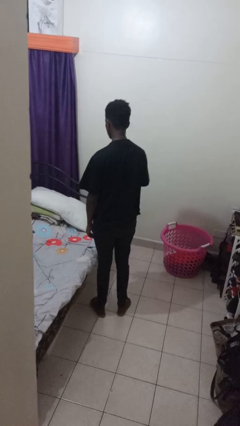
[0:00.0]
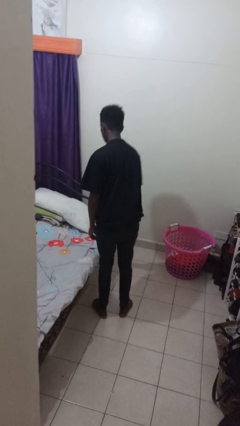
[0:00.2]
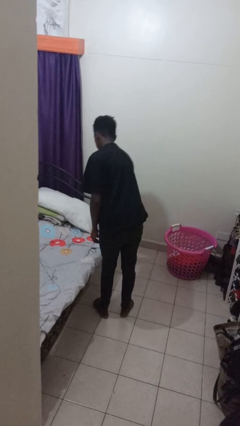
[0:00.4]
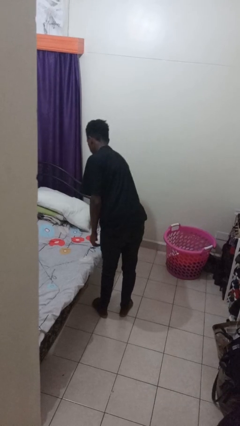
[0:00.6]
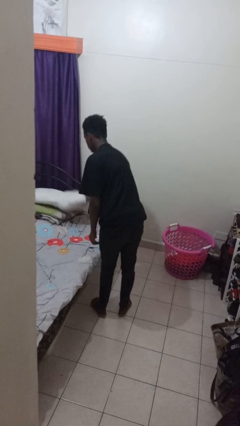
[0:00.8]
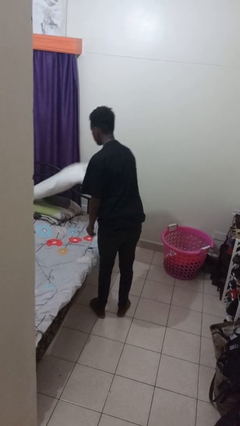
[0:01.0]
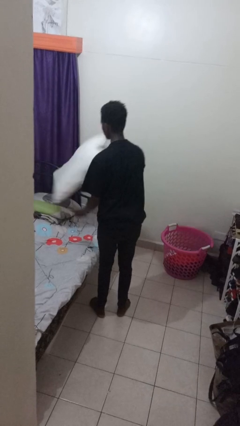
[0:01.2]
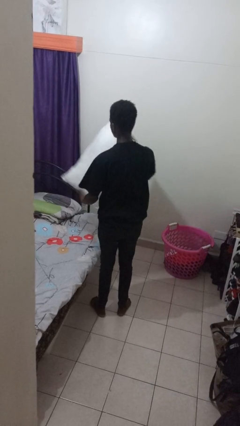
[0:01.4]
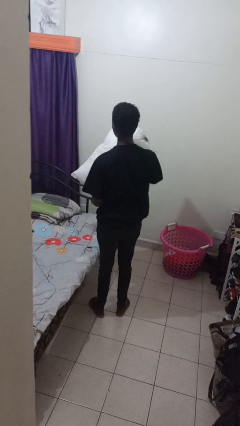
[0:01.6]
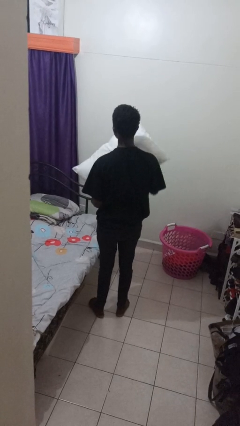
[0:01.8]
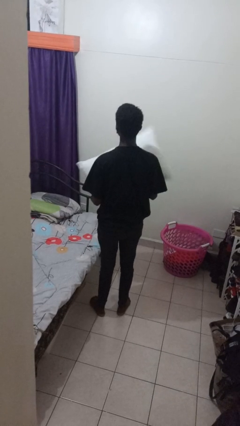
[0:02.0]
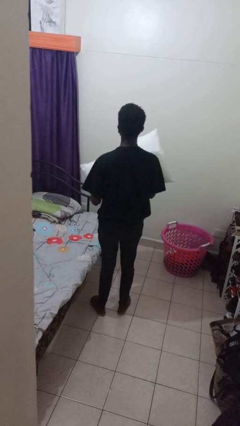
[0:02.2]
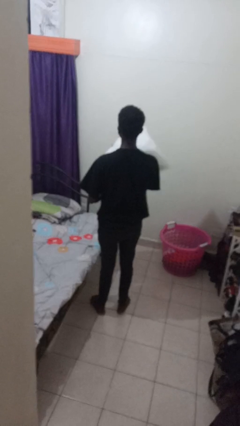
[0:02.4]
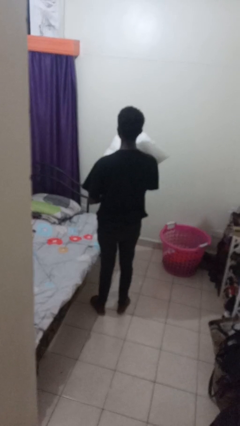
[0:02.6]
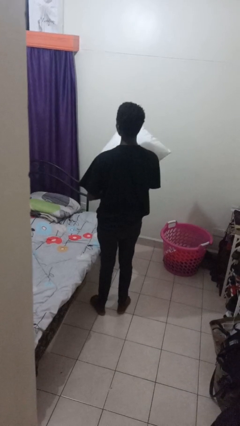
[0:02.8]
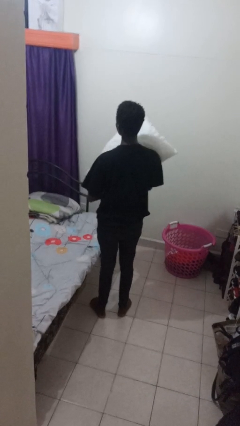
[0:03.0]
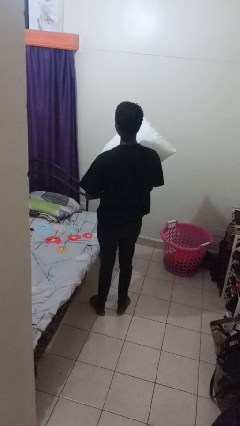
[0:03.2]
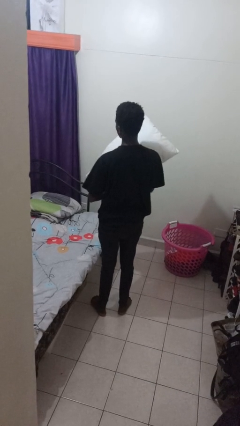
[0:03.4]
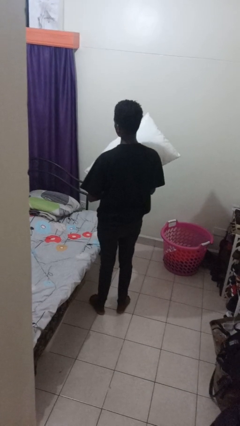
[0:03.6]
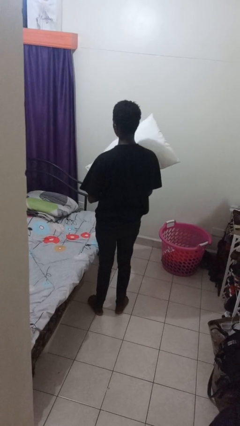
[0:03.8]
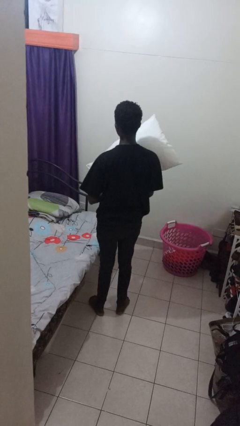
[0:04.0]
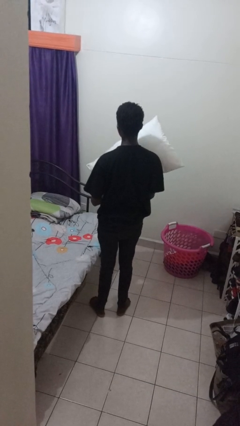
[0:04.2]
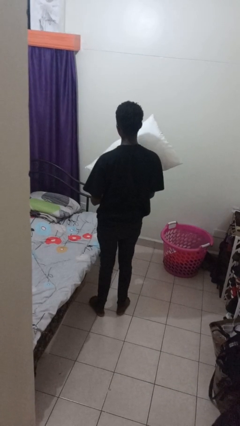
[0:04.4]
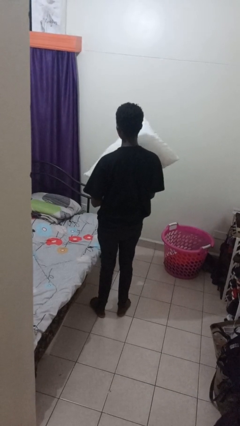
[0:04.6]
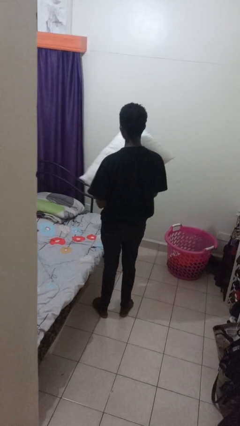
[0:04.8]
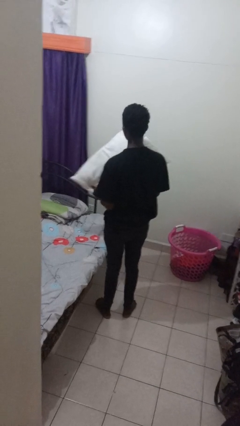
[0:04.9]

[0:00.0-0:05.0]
person picks up object from bed

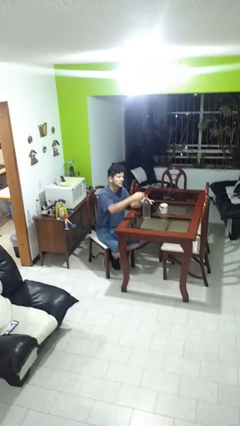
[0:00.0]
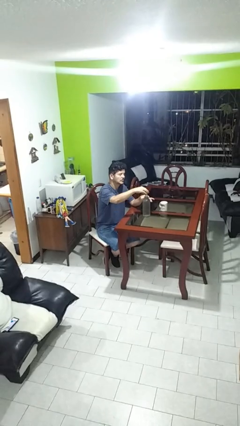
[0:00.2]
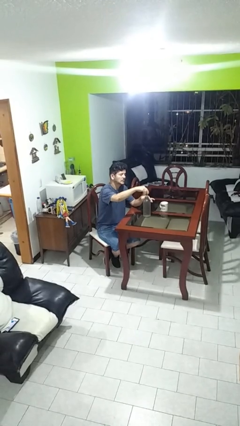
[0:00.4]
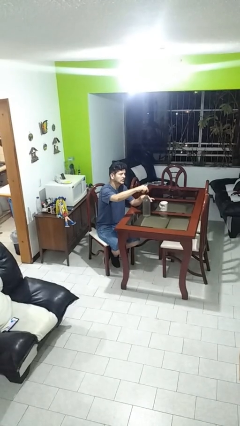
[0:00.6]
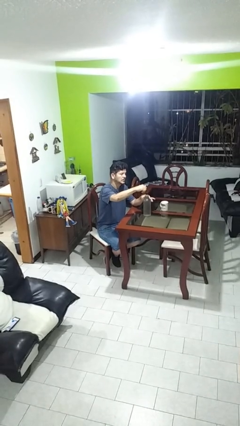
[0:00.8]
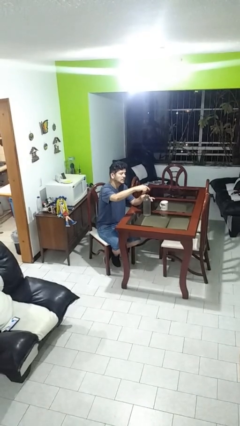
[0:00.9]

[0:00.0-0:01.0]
person screws lid to bottle

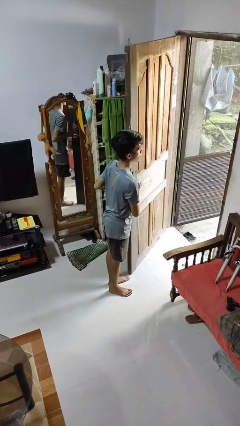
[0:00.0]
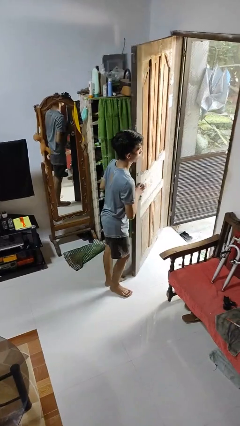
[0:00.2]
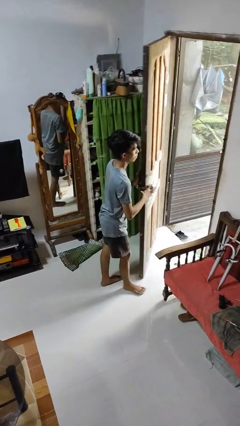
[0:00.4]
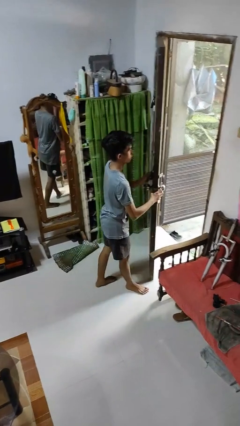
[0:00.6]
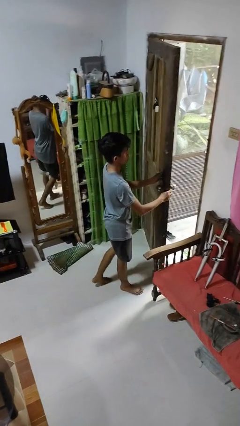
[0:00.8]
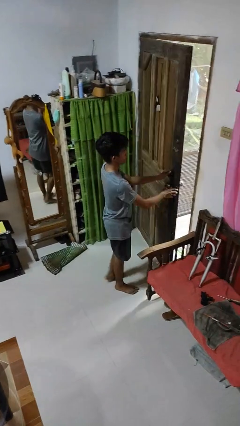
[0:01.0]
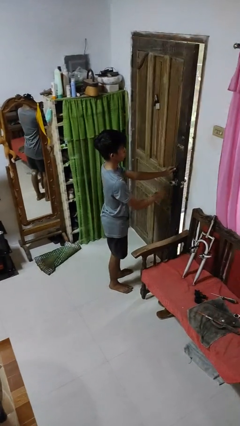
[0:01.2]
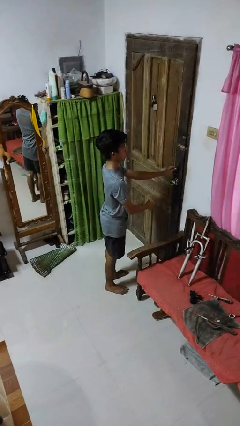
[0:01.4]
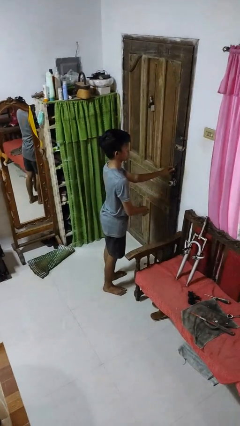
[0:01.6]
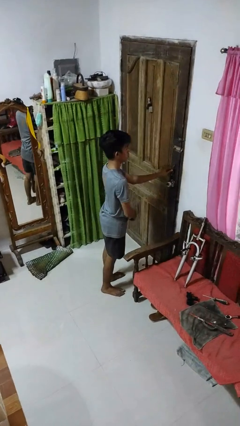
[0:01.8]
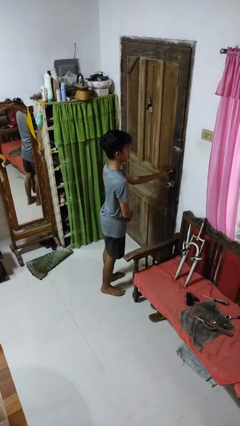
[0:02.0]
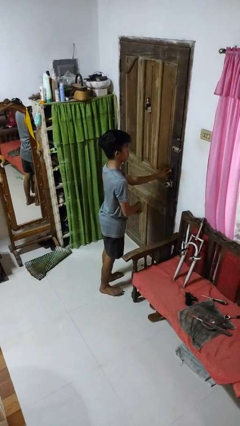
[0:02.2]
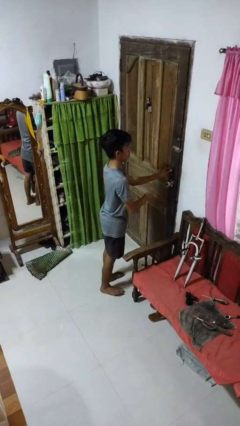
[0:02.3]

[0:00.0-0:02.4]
person closes facility door

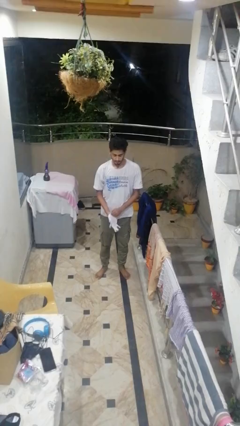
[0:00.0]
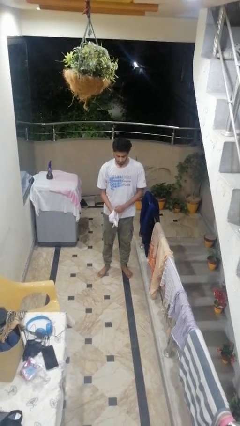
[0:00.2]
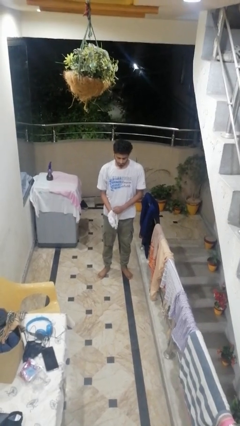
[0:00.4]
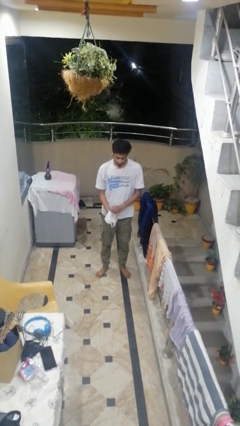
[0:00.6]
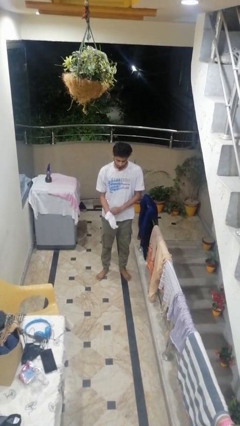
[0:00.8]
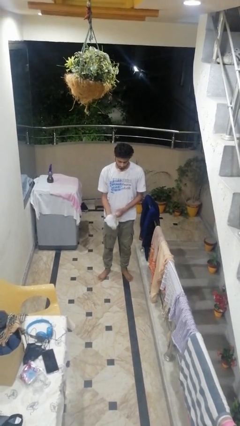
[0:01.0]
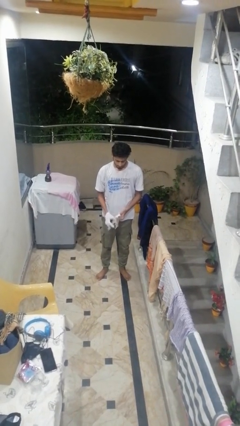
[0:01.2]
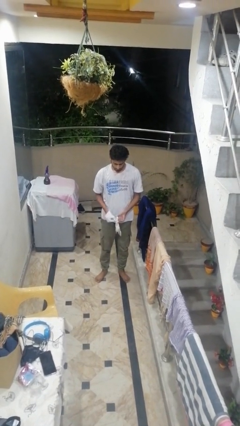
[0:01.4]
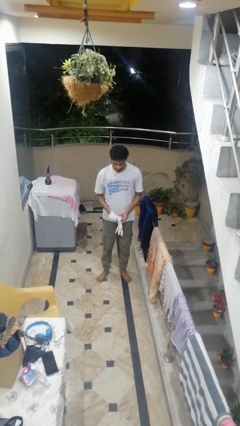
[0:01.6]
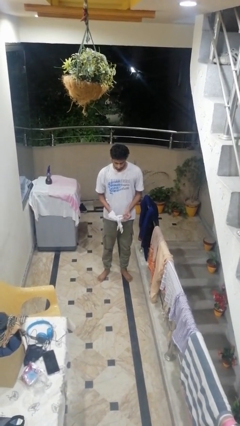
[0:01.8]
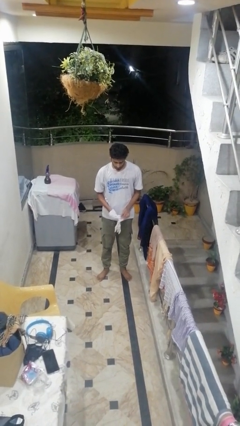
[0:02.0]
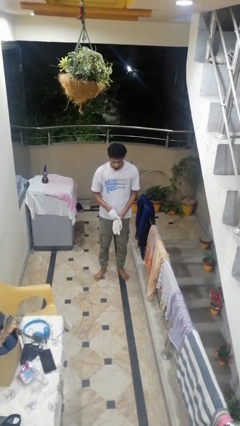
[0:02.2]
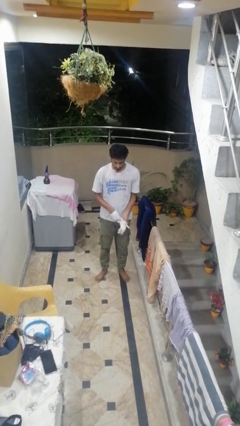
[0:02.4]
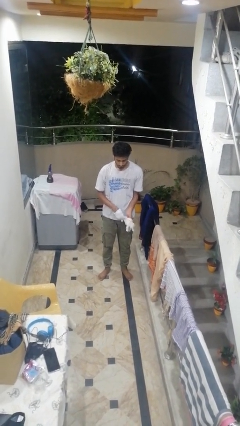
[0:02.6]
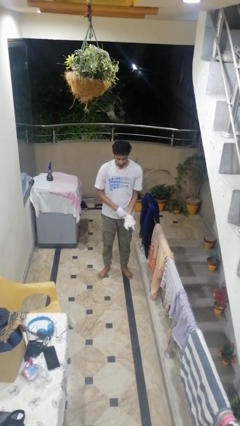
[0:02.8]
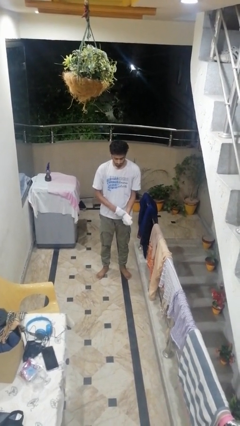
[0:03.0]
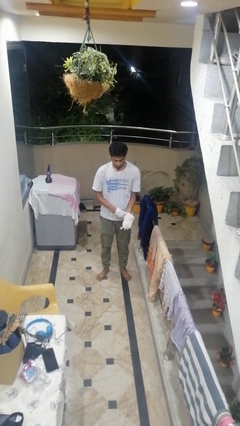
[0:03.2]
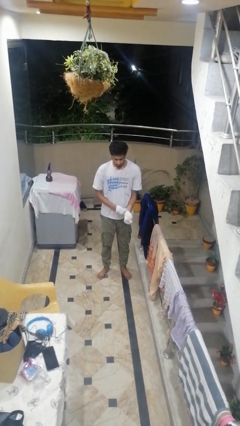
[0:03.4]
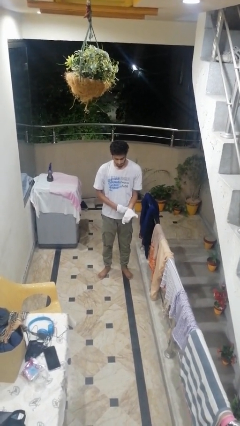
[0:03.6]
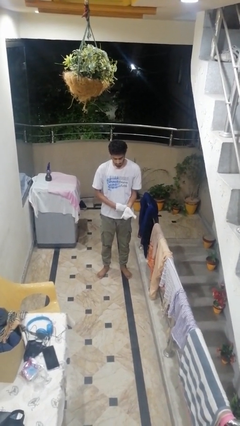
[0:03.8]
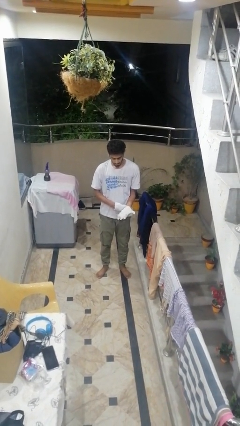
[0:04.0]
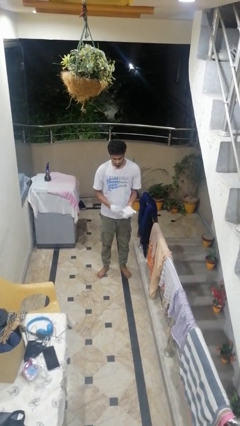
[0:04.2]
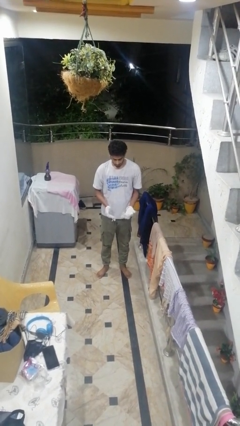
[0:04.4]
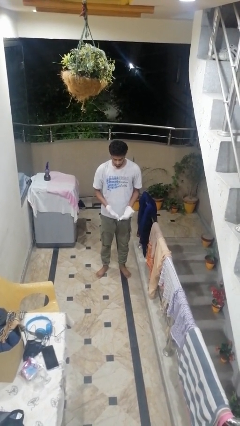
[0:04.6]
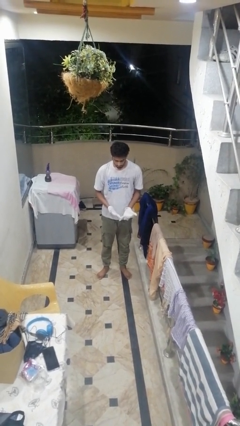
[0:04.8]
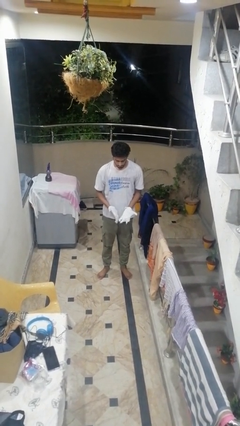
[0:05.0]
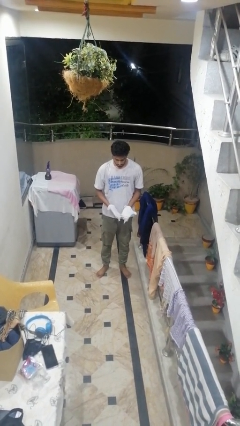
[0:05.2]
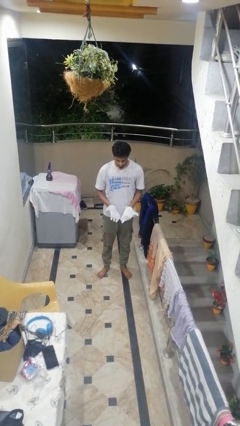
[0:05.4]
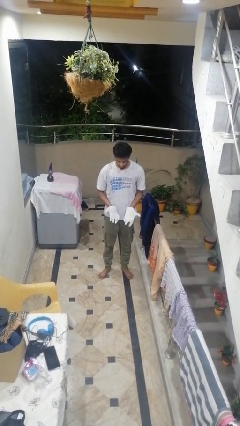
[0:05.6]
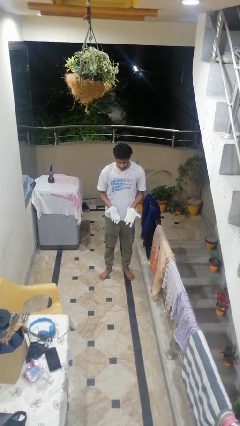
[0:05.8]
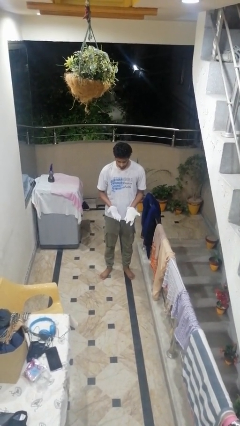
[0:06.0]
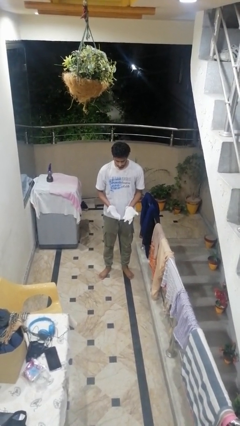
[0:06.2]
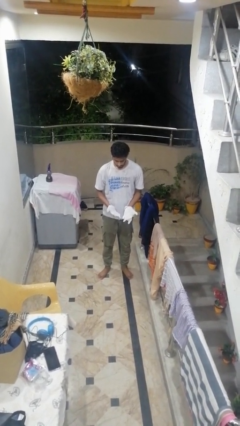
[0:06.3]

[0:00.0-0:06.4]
person puts on gloves

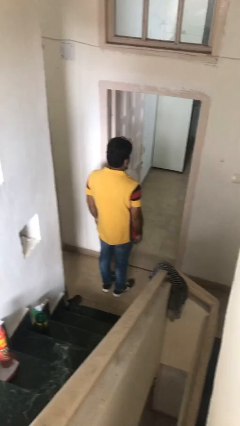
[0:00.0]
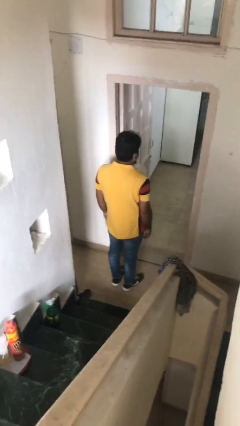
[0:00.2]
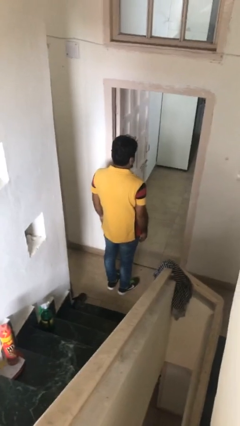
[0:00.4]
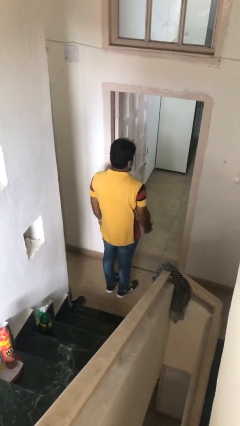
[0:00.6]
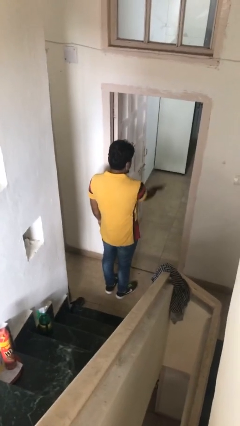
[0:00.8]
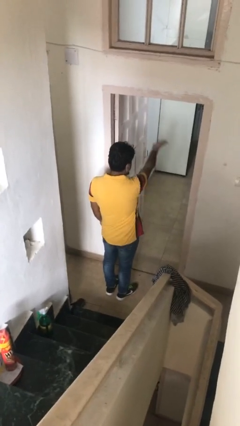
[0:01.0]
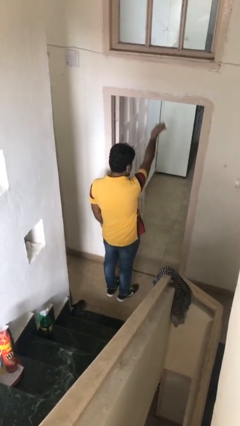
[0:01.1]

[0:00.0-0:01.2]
person gestures swipe up

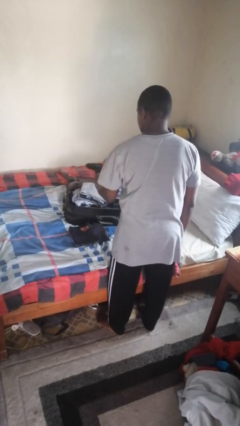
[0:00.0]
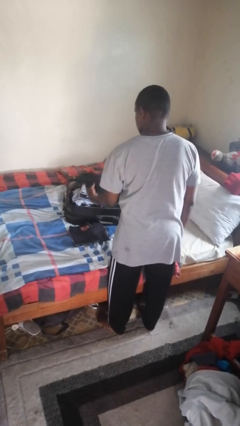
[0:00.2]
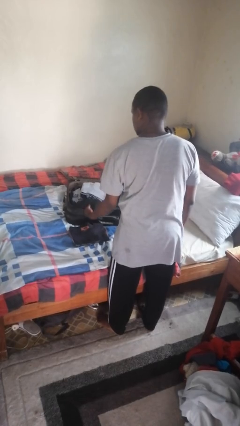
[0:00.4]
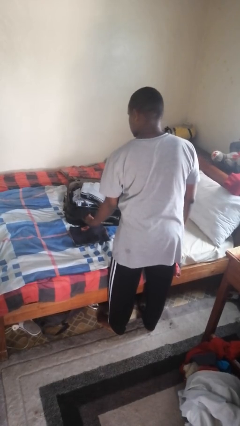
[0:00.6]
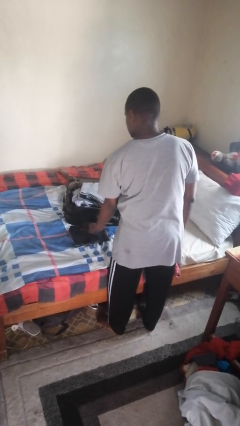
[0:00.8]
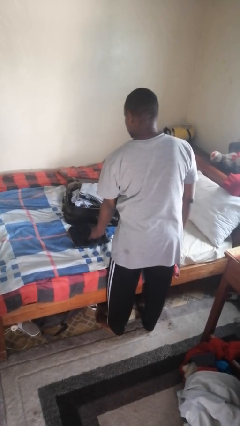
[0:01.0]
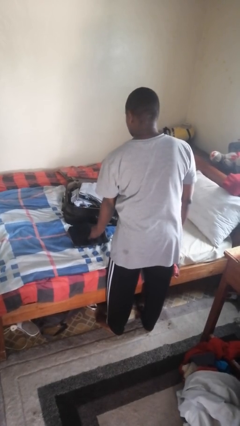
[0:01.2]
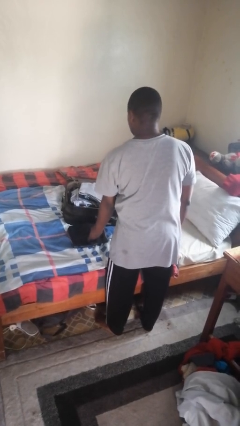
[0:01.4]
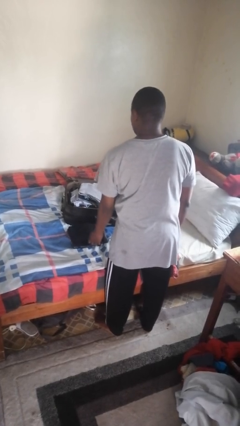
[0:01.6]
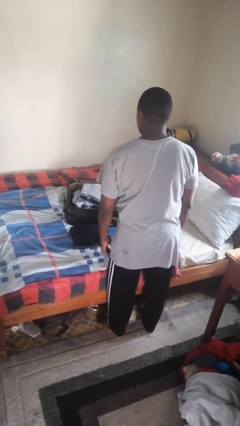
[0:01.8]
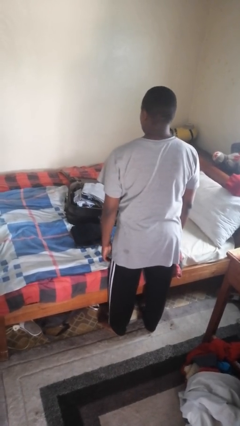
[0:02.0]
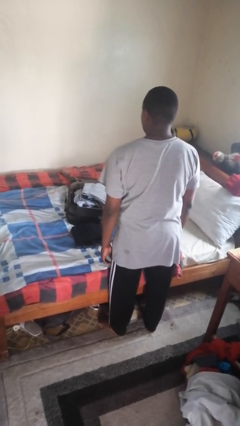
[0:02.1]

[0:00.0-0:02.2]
person unloads clothes from suitcase
